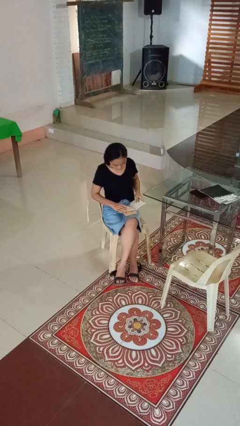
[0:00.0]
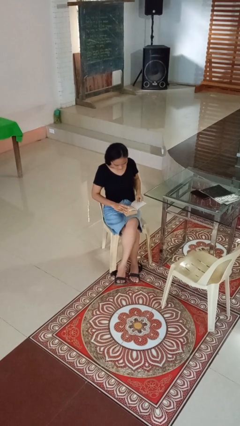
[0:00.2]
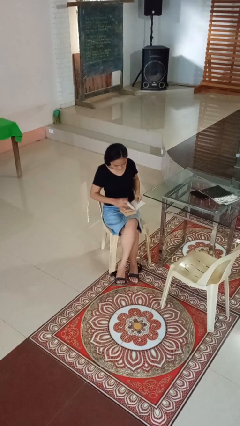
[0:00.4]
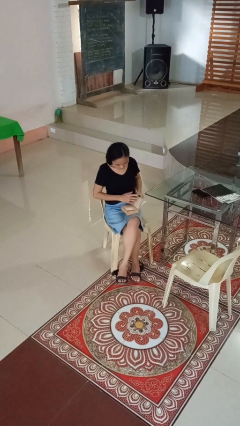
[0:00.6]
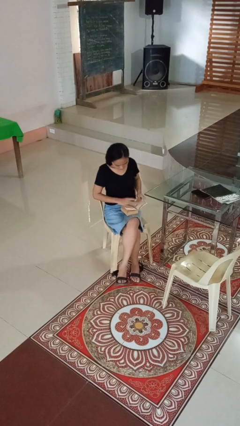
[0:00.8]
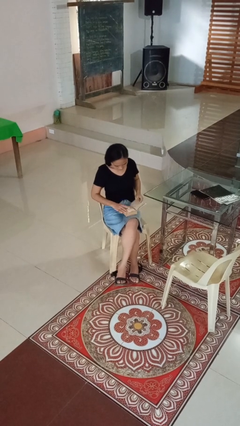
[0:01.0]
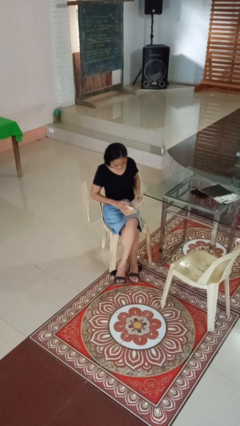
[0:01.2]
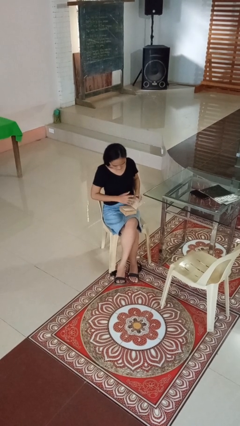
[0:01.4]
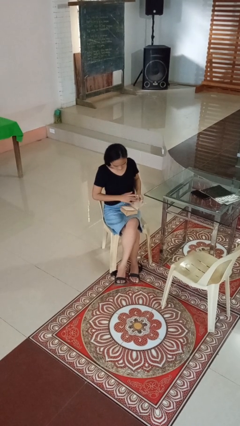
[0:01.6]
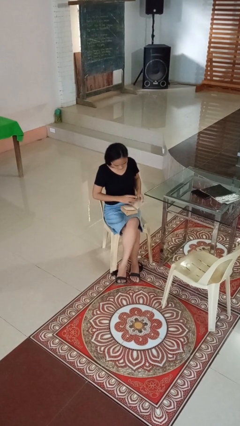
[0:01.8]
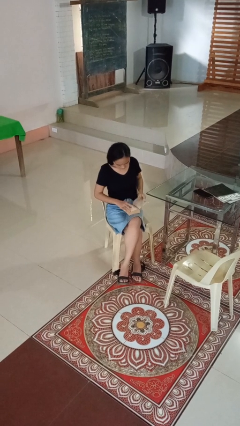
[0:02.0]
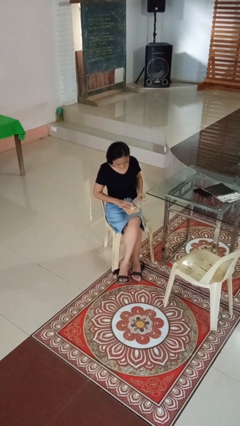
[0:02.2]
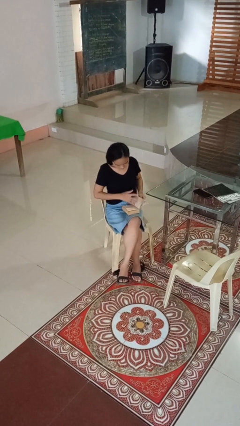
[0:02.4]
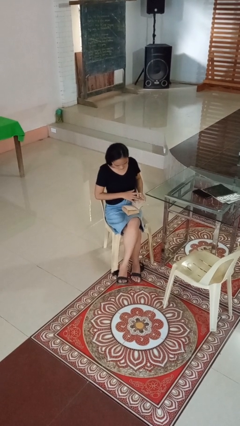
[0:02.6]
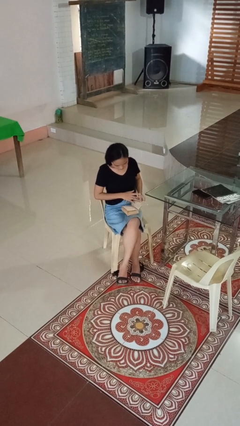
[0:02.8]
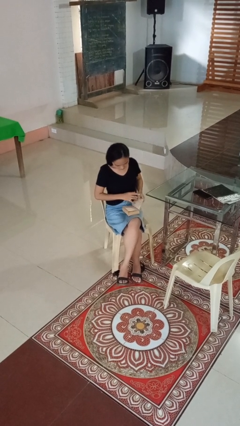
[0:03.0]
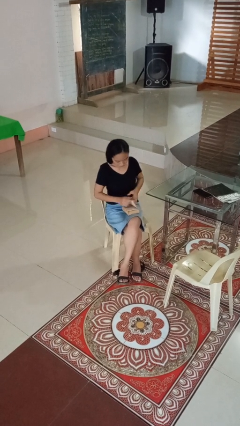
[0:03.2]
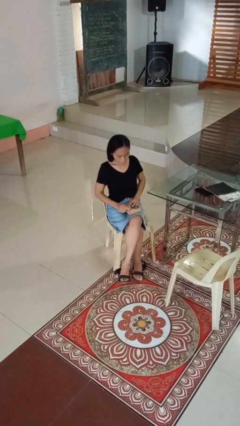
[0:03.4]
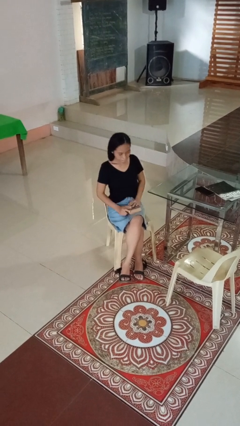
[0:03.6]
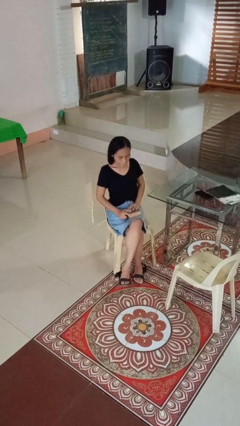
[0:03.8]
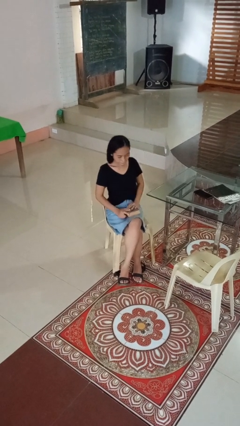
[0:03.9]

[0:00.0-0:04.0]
person reads book

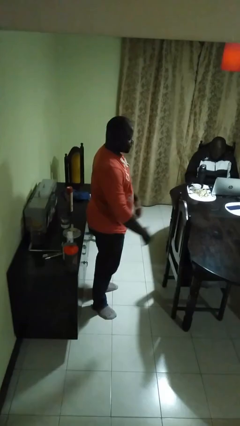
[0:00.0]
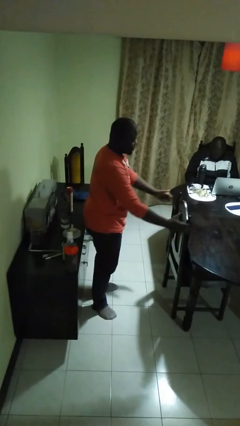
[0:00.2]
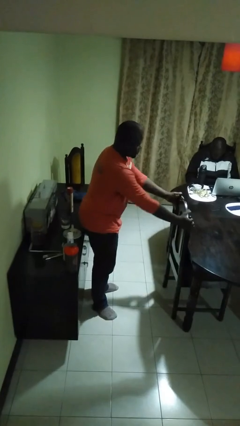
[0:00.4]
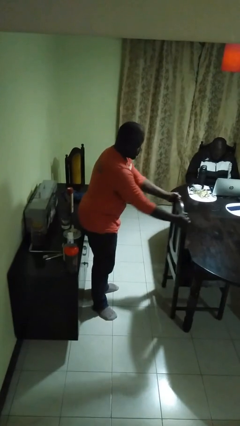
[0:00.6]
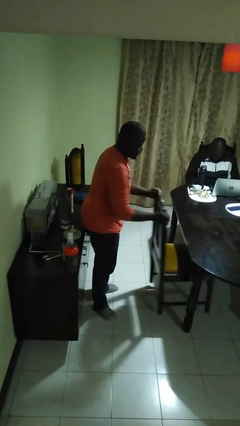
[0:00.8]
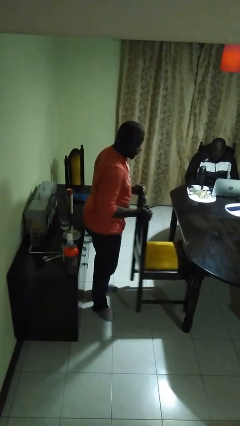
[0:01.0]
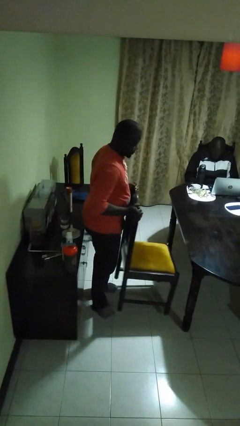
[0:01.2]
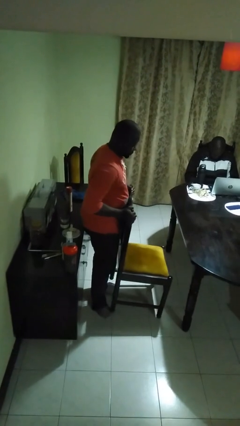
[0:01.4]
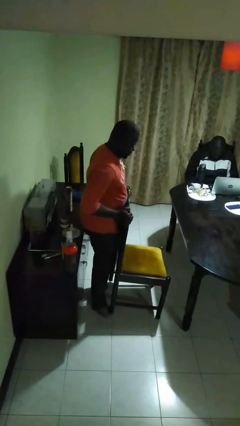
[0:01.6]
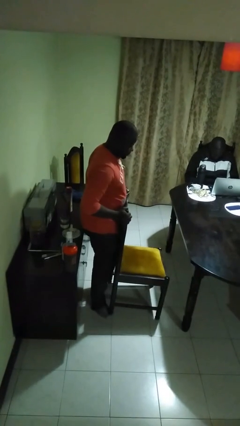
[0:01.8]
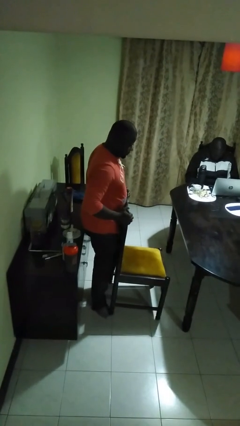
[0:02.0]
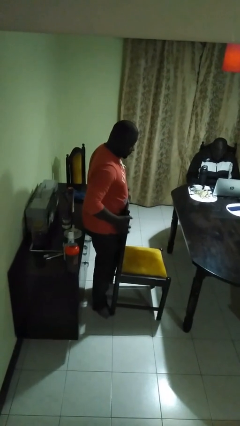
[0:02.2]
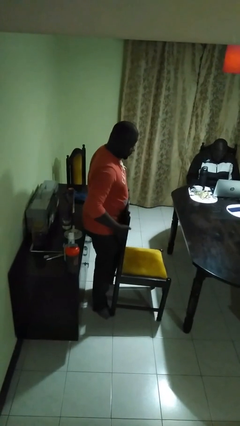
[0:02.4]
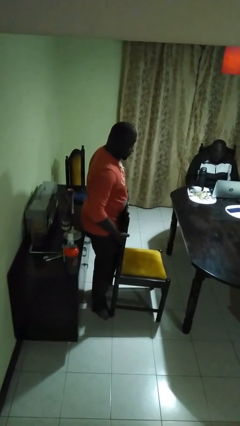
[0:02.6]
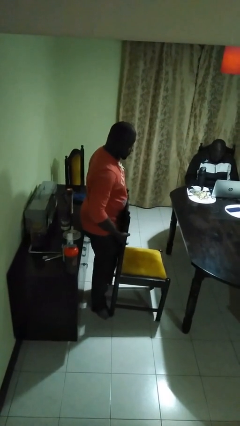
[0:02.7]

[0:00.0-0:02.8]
person pulls out chair

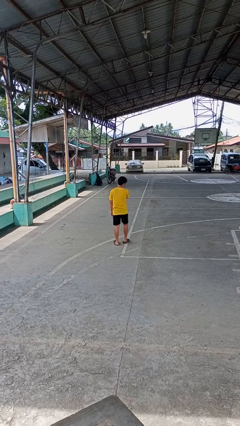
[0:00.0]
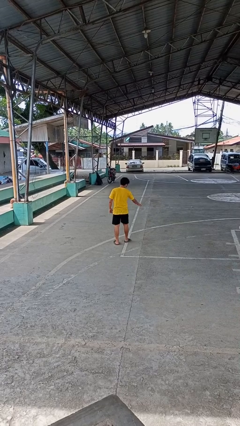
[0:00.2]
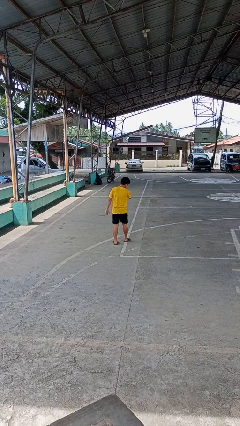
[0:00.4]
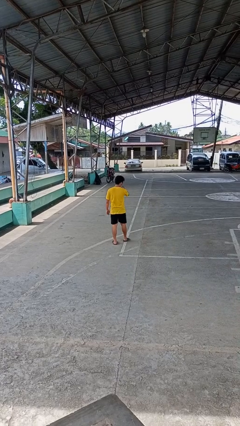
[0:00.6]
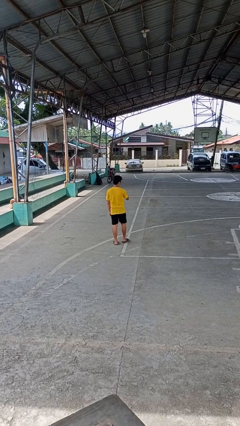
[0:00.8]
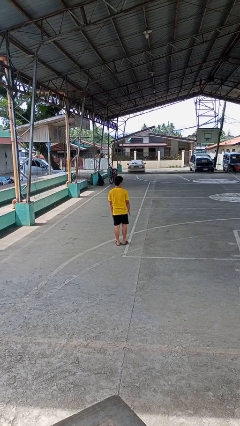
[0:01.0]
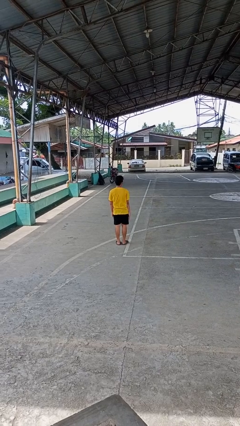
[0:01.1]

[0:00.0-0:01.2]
person karate chop

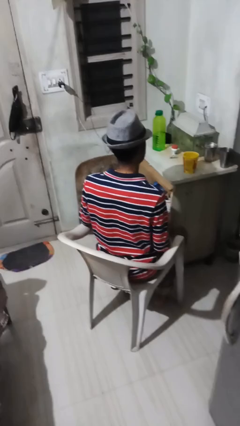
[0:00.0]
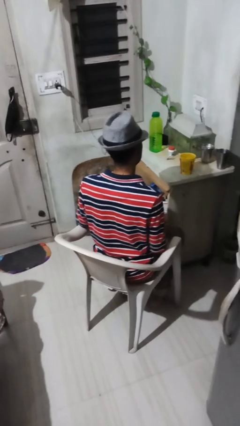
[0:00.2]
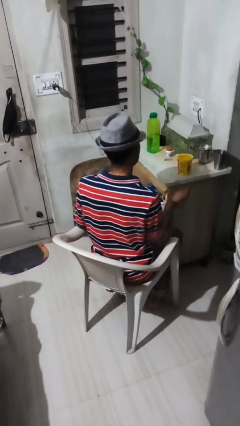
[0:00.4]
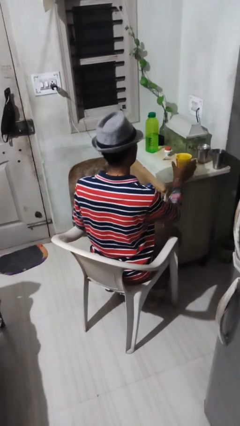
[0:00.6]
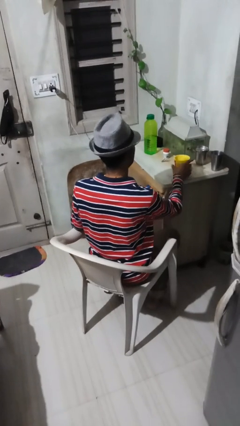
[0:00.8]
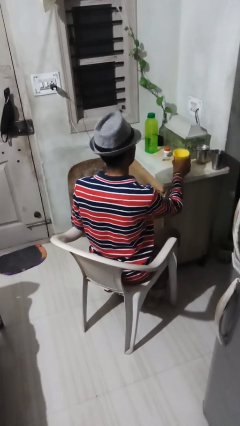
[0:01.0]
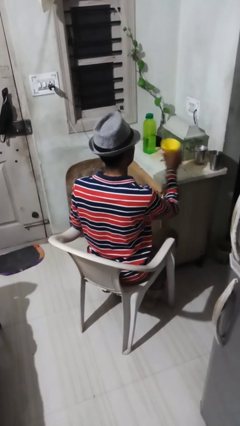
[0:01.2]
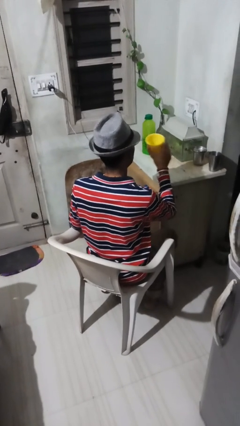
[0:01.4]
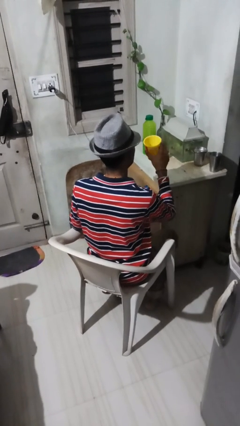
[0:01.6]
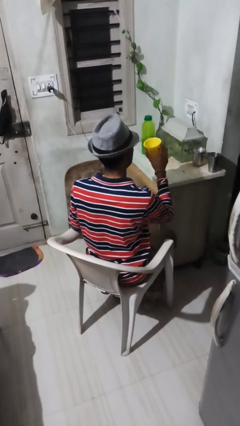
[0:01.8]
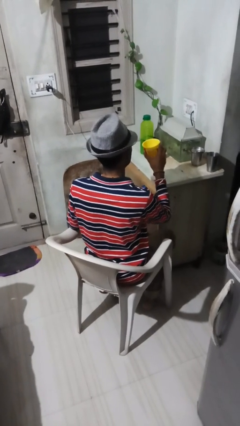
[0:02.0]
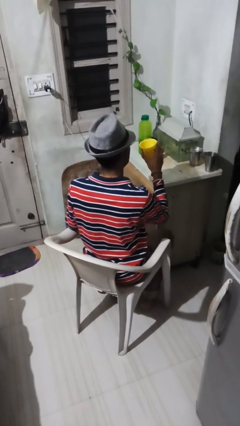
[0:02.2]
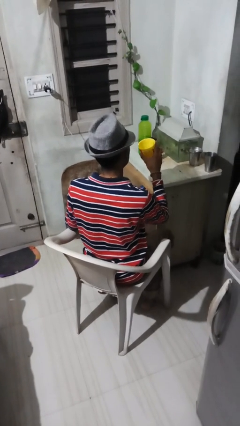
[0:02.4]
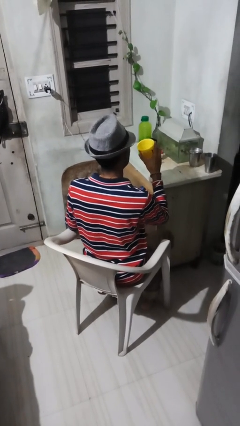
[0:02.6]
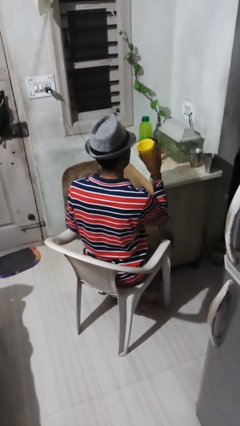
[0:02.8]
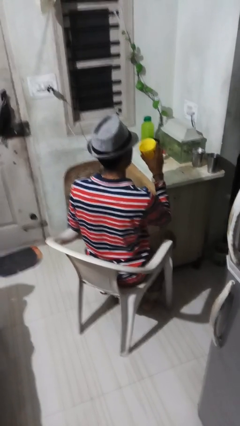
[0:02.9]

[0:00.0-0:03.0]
person picks up object from table

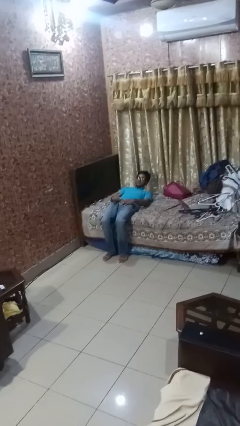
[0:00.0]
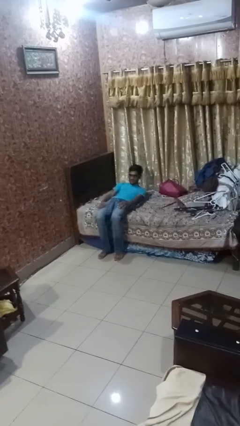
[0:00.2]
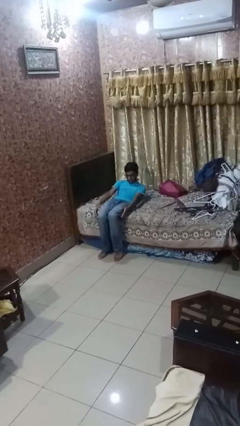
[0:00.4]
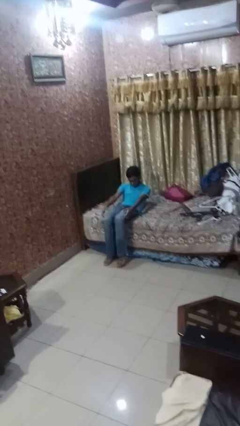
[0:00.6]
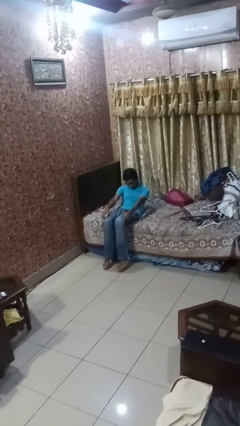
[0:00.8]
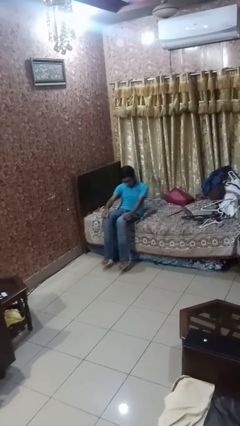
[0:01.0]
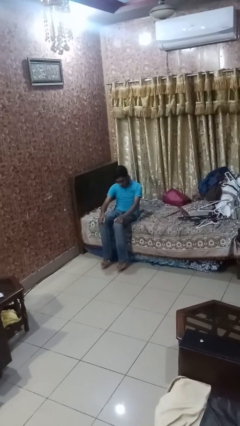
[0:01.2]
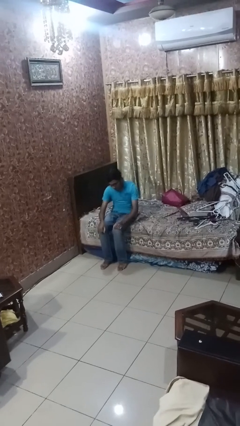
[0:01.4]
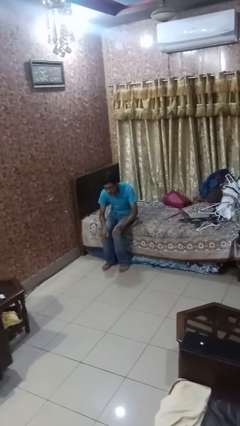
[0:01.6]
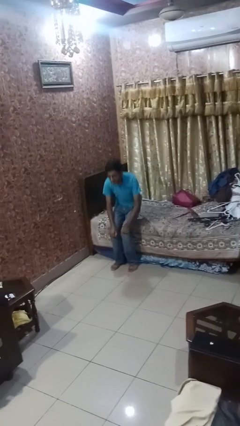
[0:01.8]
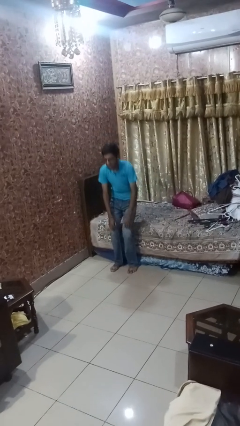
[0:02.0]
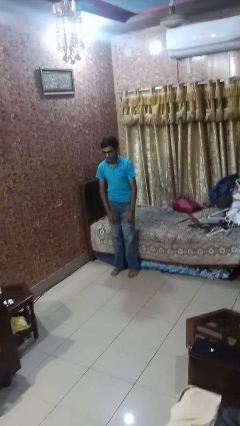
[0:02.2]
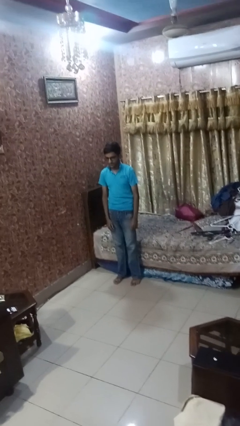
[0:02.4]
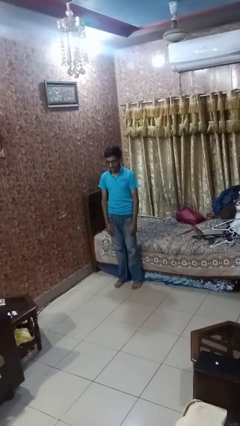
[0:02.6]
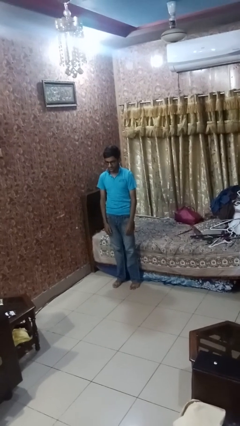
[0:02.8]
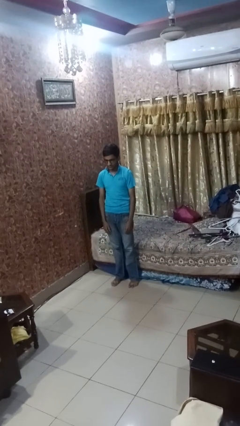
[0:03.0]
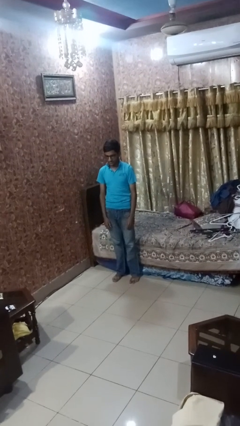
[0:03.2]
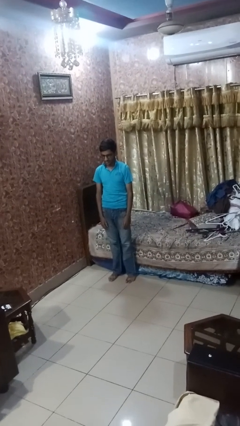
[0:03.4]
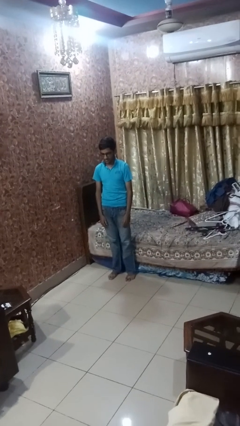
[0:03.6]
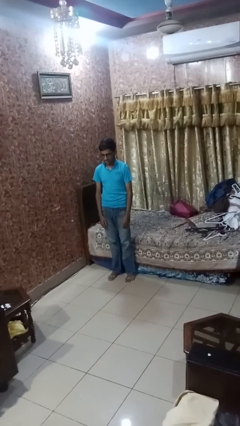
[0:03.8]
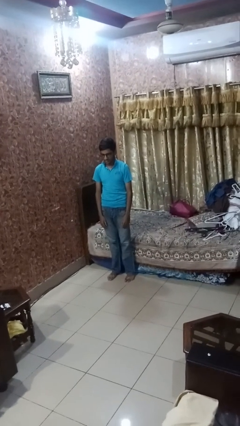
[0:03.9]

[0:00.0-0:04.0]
person stands up

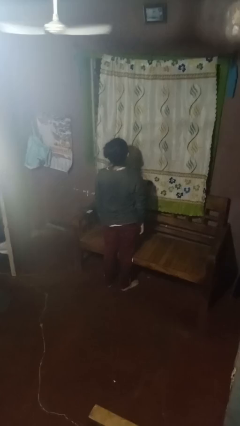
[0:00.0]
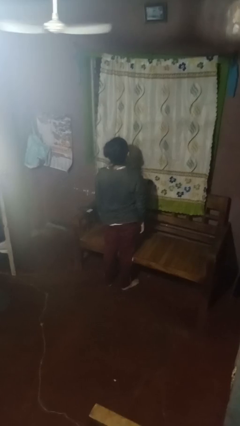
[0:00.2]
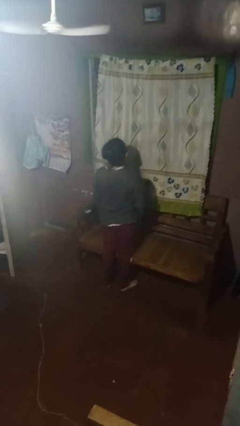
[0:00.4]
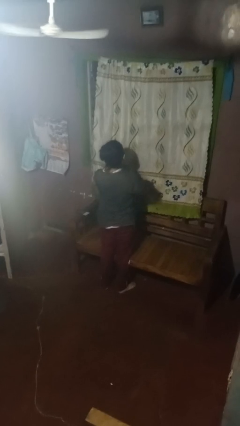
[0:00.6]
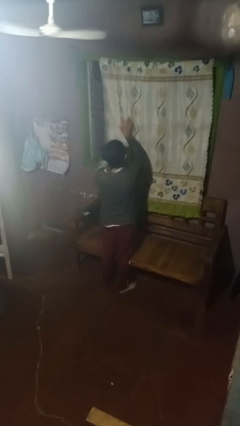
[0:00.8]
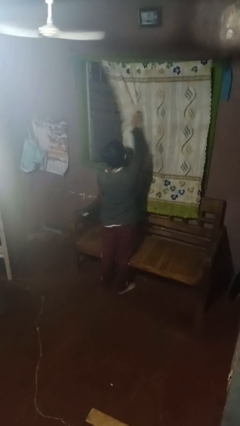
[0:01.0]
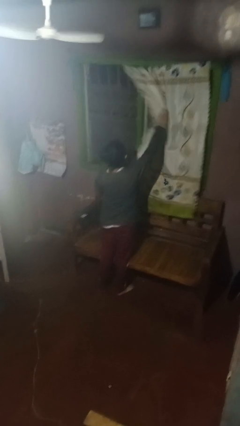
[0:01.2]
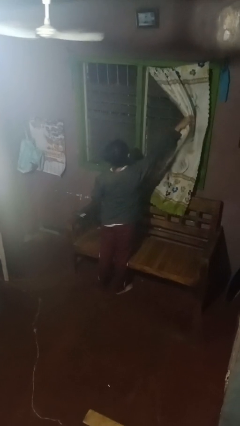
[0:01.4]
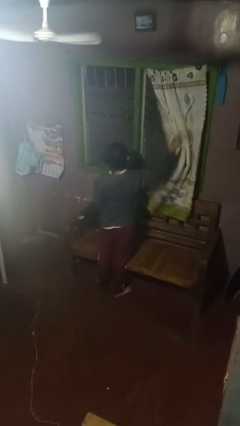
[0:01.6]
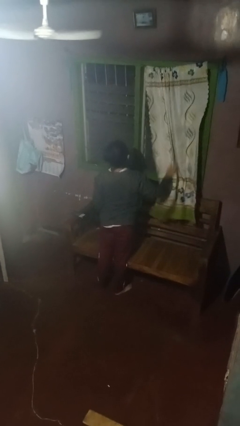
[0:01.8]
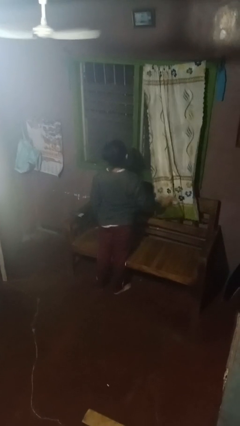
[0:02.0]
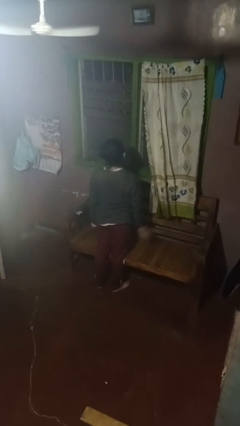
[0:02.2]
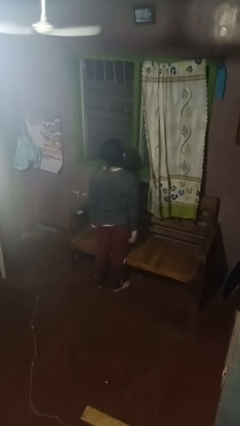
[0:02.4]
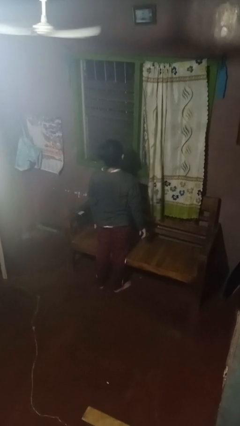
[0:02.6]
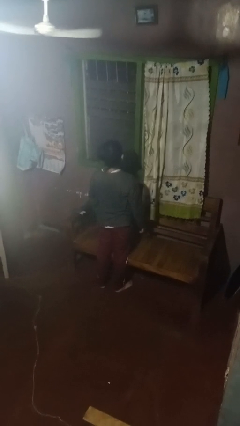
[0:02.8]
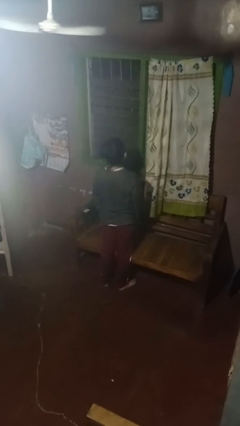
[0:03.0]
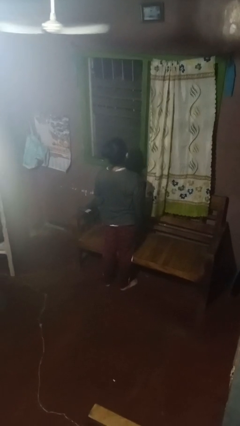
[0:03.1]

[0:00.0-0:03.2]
person opens curtains
